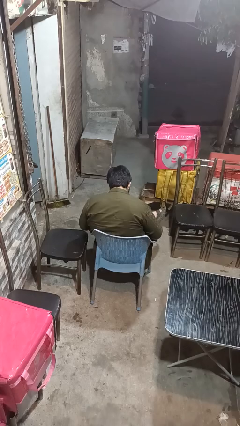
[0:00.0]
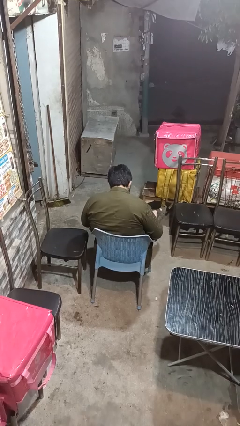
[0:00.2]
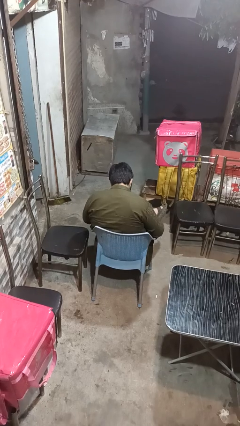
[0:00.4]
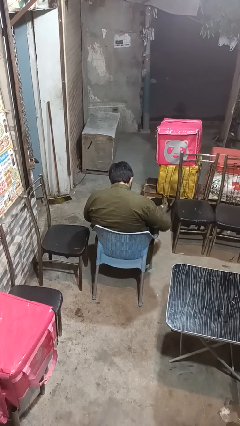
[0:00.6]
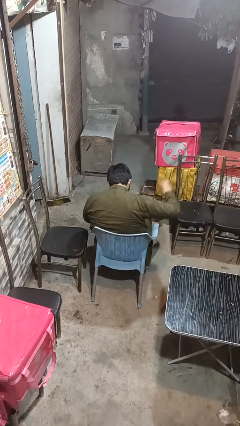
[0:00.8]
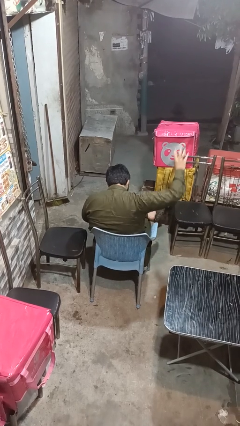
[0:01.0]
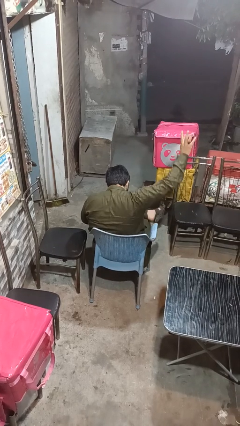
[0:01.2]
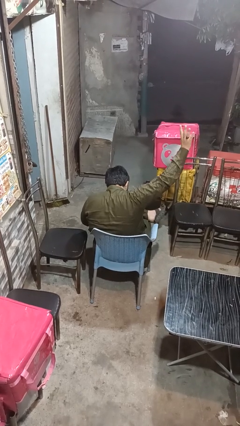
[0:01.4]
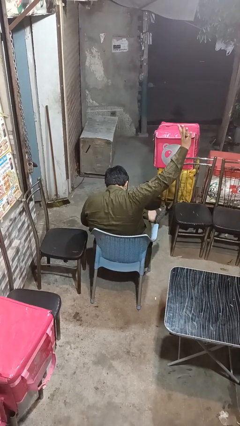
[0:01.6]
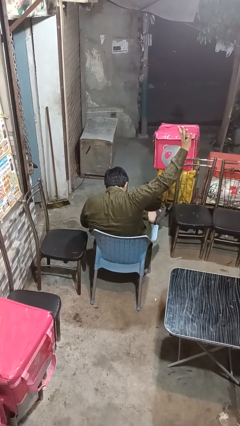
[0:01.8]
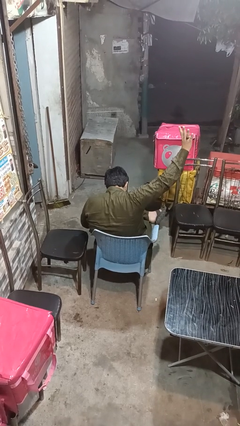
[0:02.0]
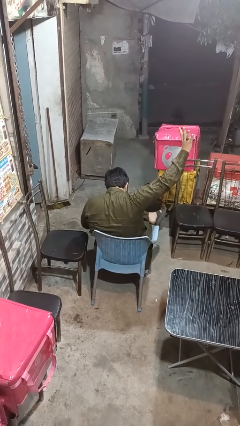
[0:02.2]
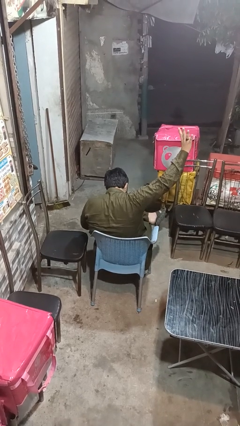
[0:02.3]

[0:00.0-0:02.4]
person gestures number four

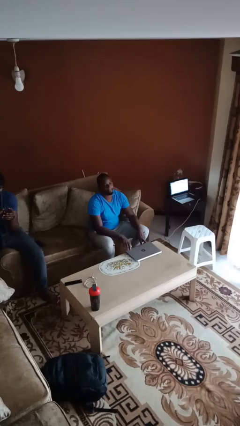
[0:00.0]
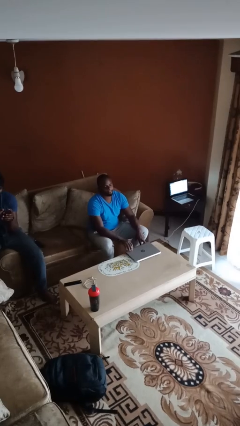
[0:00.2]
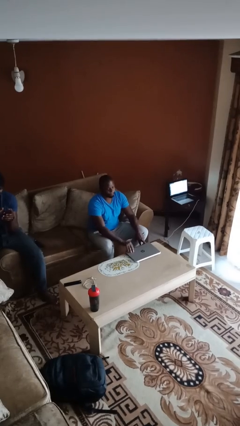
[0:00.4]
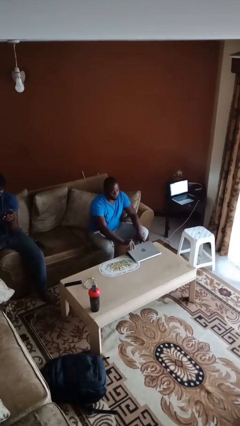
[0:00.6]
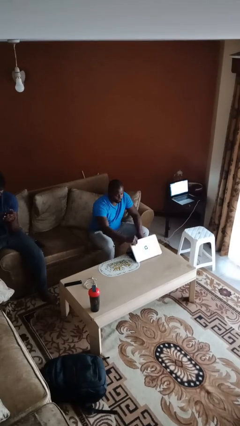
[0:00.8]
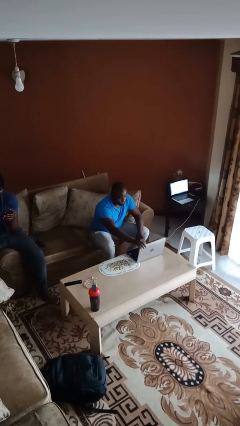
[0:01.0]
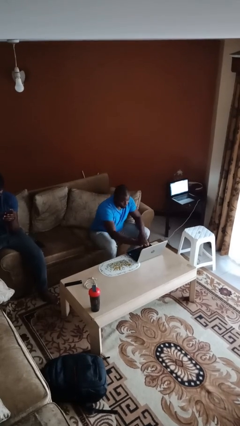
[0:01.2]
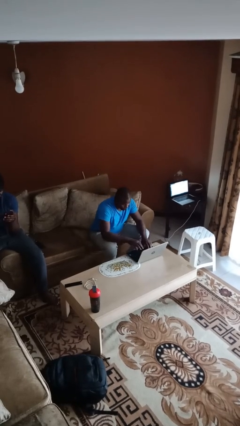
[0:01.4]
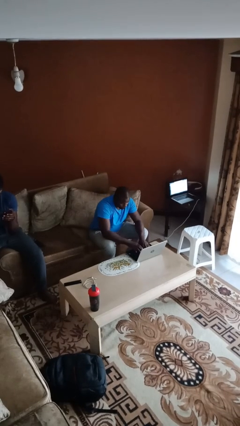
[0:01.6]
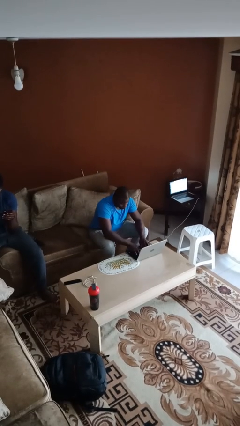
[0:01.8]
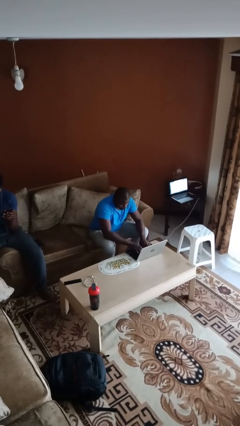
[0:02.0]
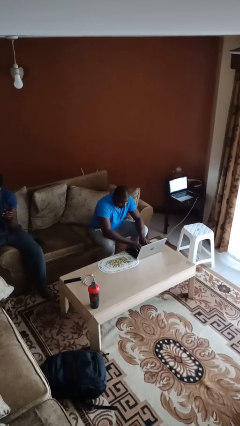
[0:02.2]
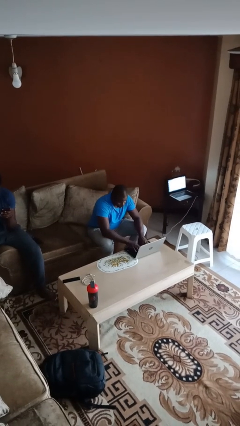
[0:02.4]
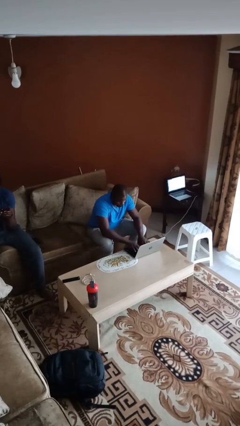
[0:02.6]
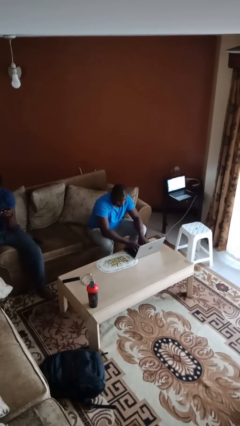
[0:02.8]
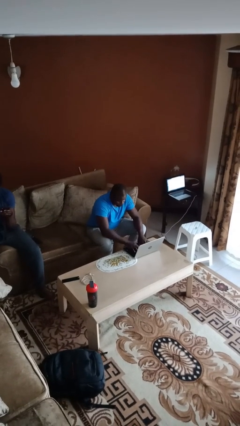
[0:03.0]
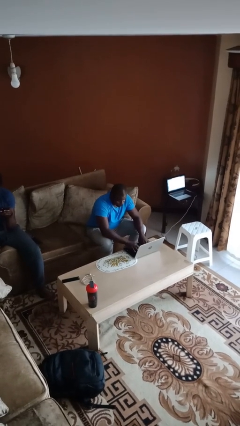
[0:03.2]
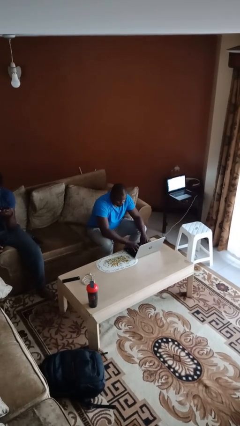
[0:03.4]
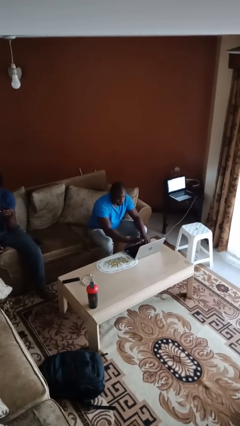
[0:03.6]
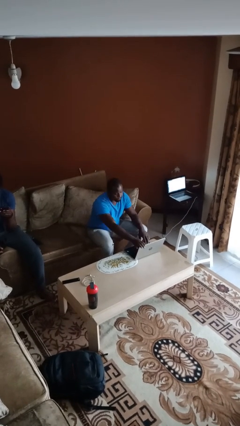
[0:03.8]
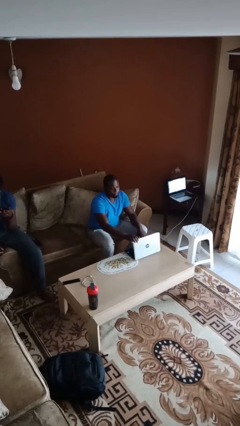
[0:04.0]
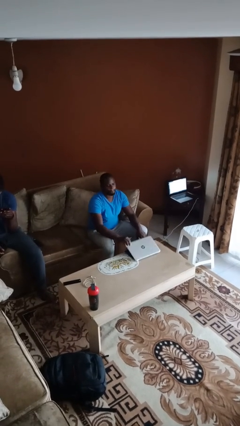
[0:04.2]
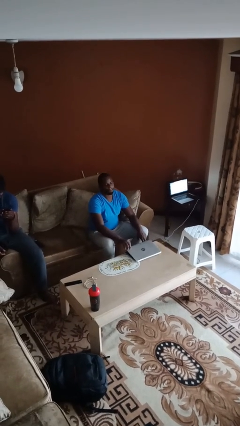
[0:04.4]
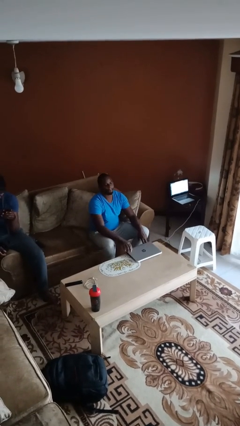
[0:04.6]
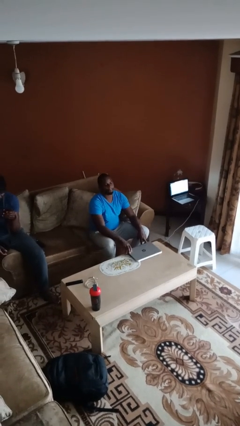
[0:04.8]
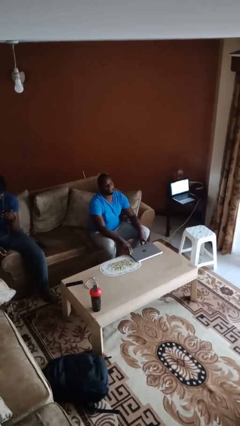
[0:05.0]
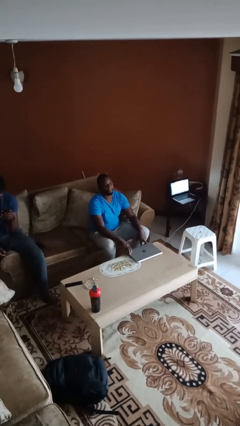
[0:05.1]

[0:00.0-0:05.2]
person interacts with laptop

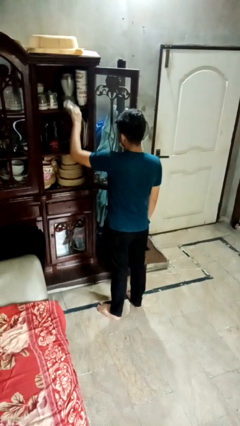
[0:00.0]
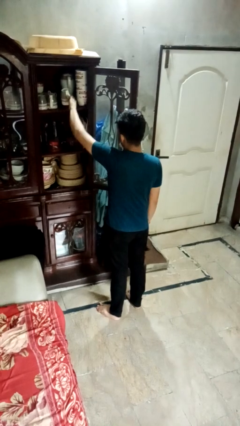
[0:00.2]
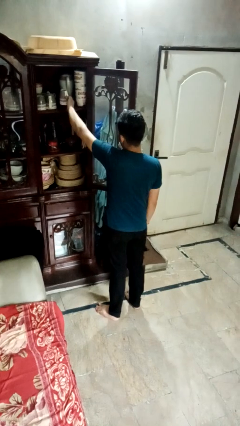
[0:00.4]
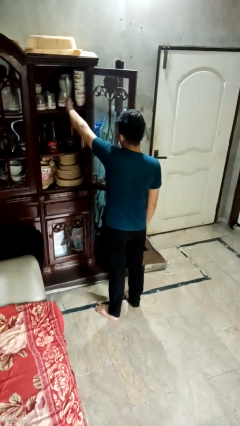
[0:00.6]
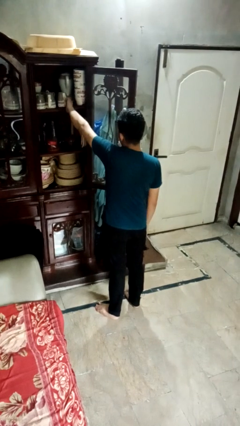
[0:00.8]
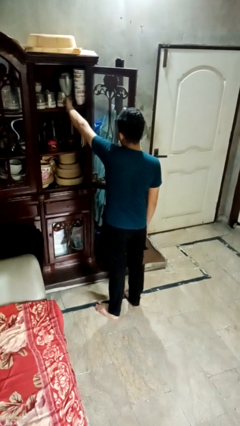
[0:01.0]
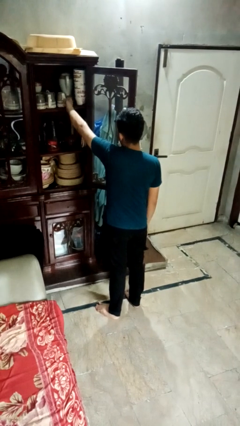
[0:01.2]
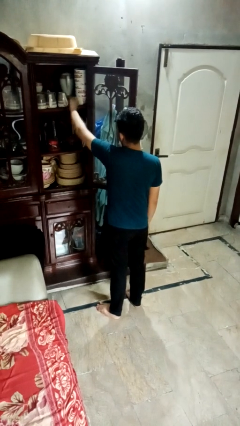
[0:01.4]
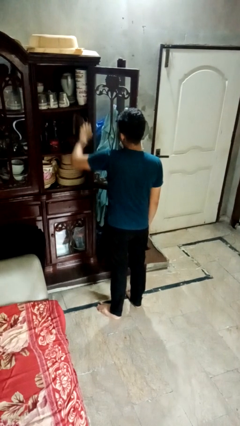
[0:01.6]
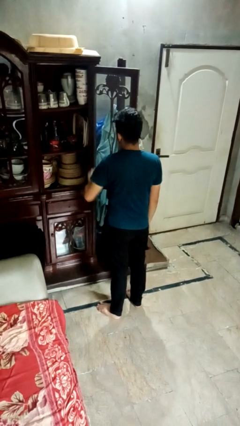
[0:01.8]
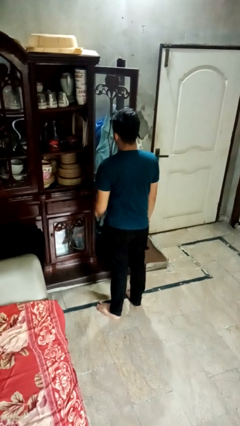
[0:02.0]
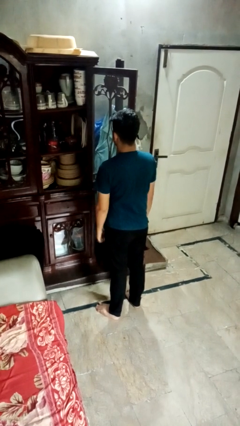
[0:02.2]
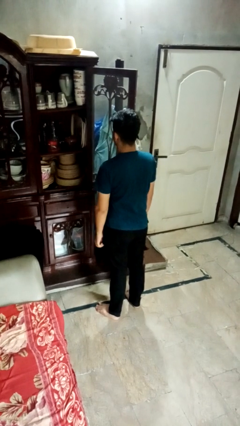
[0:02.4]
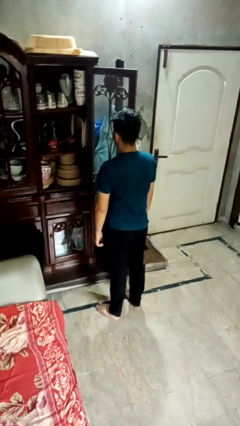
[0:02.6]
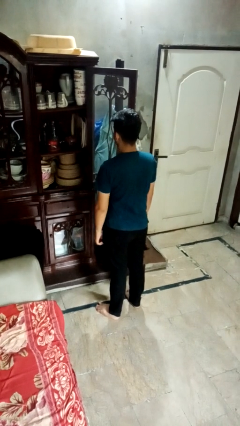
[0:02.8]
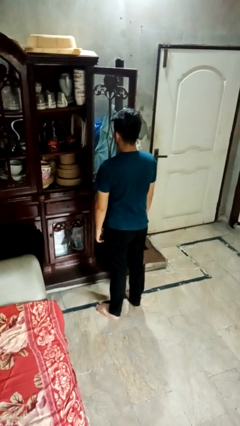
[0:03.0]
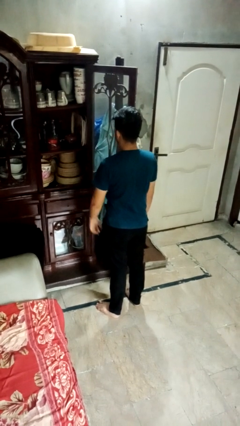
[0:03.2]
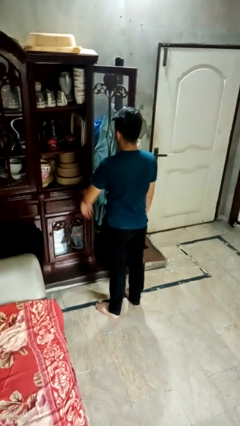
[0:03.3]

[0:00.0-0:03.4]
person puts object in cabinet

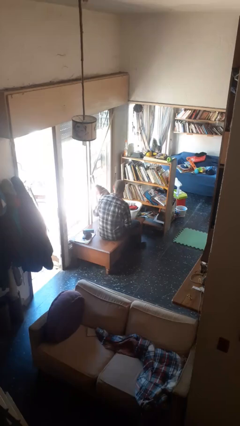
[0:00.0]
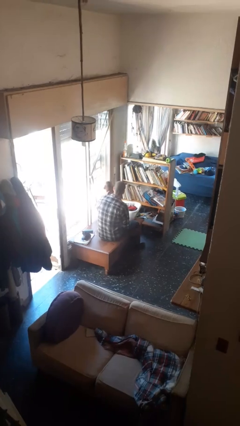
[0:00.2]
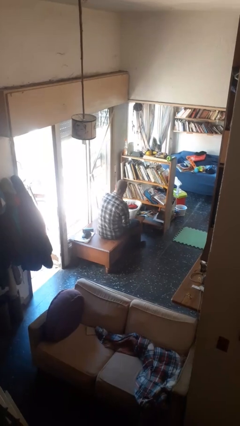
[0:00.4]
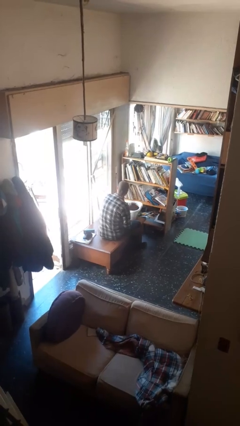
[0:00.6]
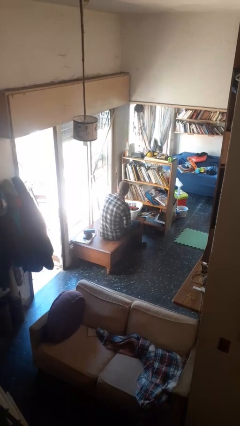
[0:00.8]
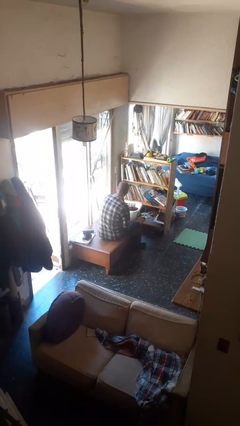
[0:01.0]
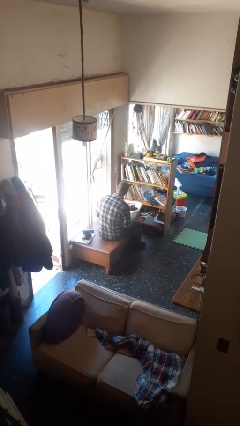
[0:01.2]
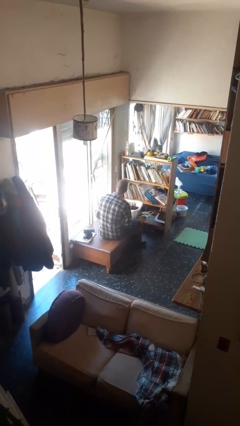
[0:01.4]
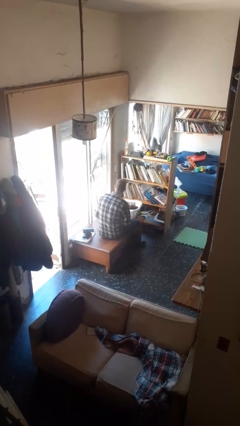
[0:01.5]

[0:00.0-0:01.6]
person puts object into basket

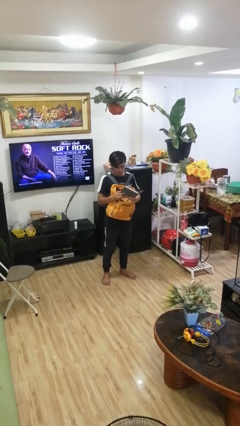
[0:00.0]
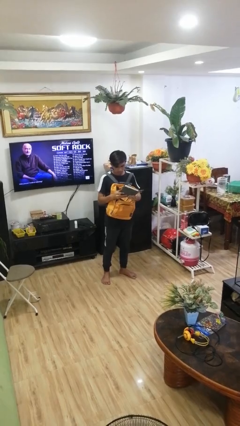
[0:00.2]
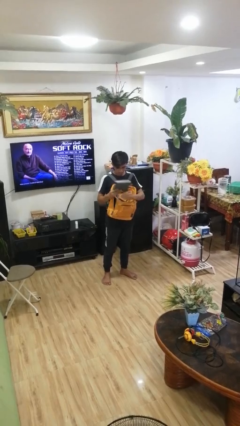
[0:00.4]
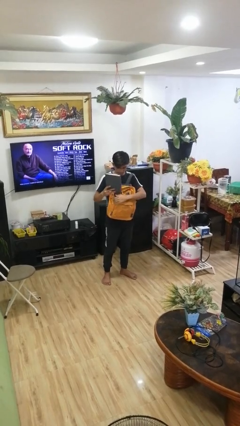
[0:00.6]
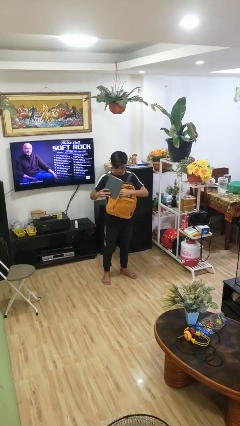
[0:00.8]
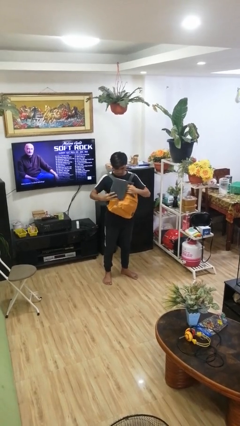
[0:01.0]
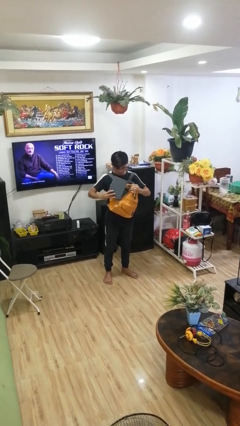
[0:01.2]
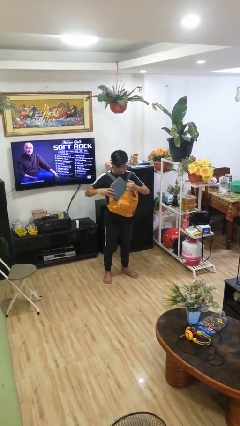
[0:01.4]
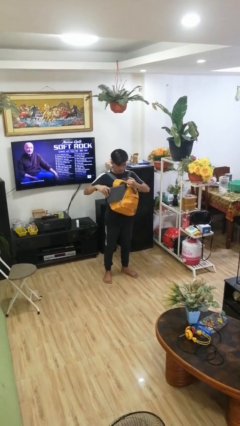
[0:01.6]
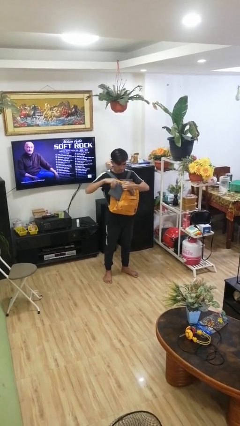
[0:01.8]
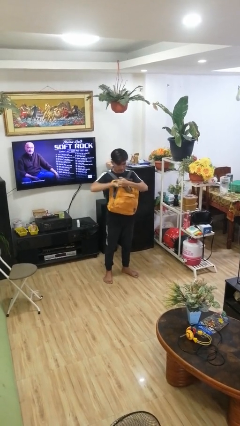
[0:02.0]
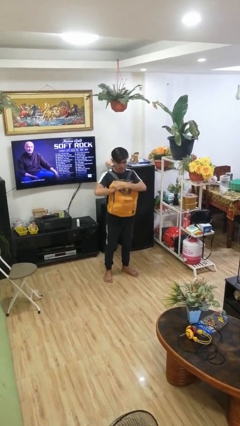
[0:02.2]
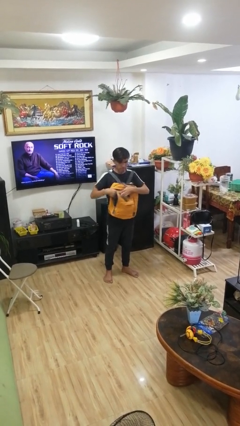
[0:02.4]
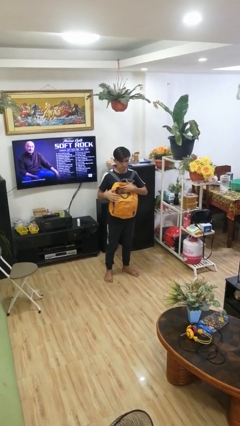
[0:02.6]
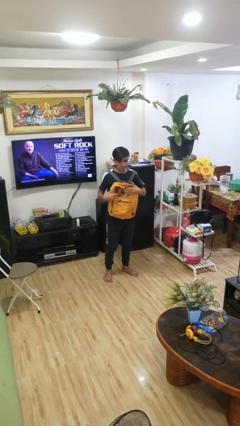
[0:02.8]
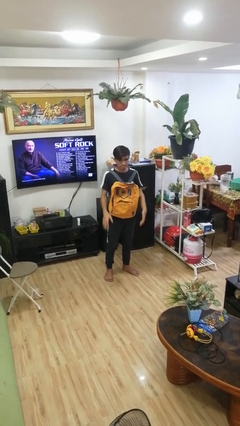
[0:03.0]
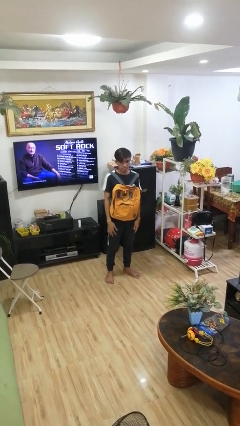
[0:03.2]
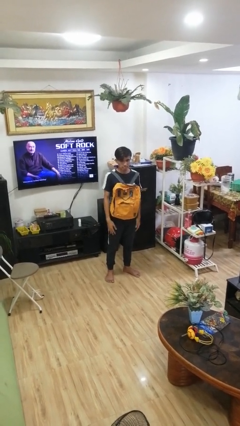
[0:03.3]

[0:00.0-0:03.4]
person puts object into backpack

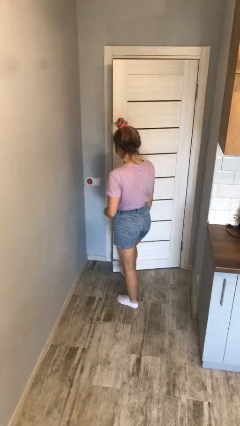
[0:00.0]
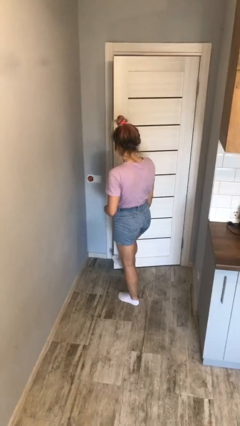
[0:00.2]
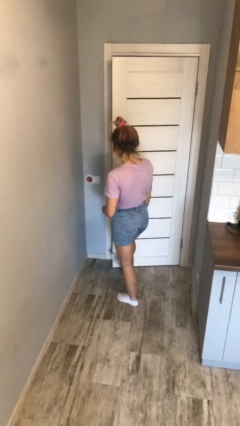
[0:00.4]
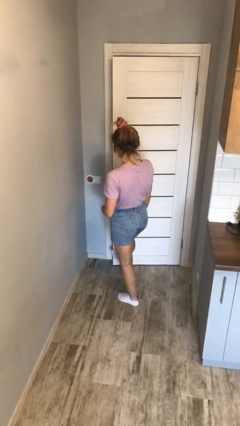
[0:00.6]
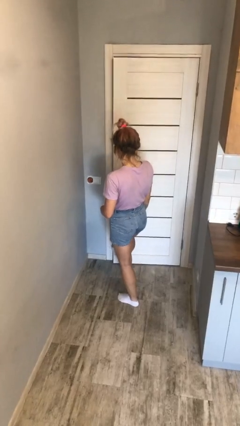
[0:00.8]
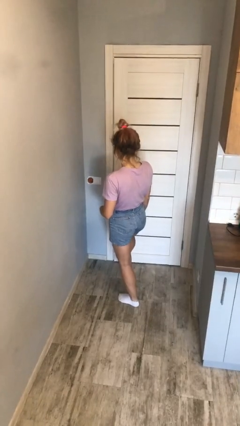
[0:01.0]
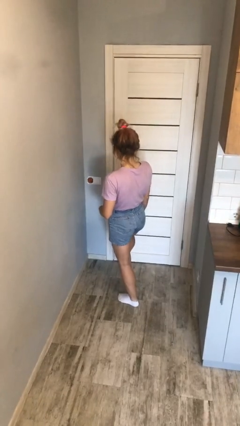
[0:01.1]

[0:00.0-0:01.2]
person closes door with foot

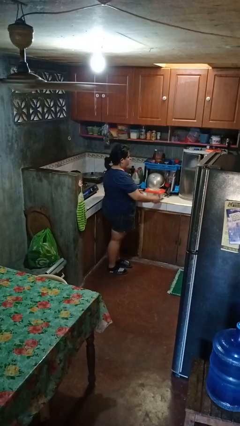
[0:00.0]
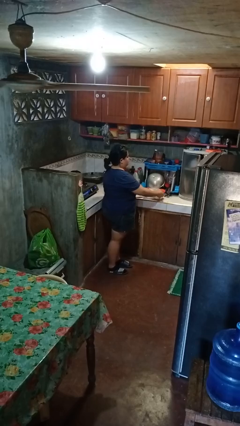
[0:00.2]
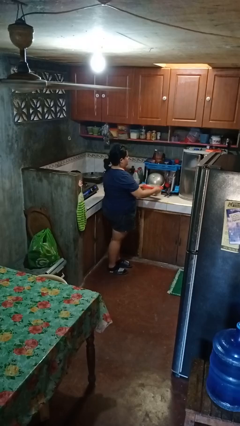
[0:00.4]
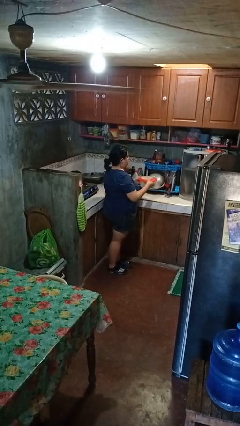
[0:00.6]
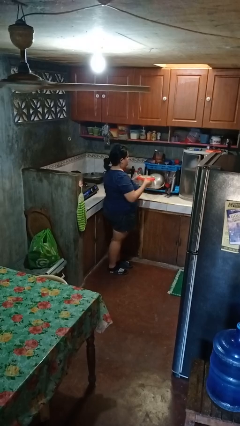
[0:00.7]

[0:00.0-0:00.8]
person picks up object from countertop
